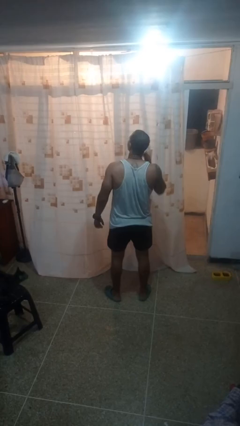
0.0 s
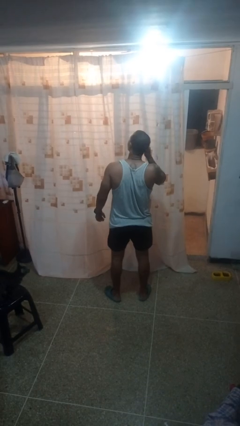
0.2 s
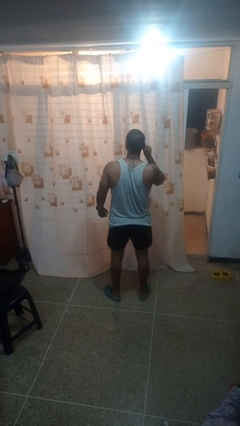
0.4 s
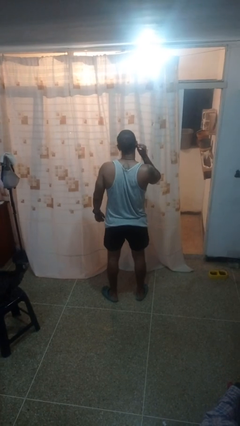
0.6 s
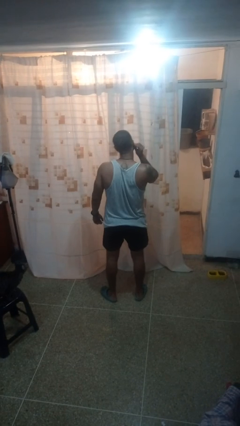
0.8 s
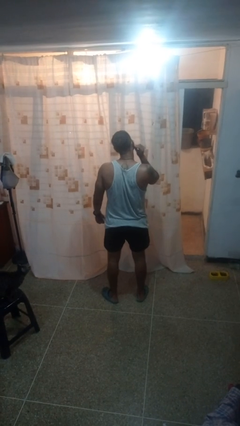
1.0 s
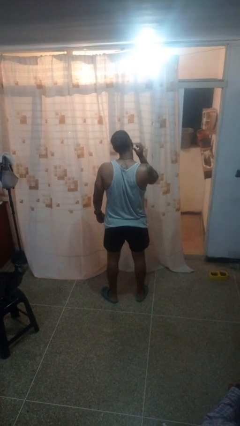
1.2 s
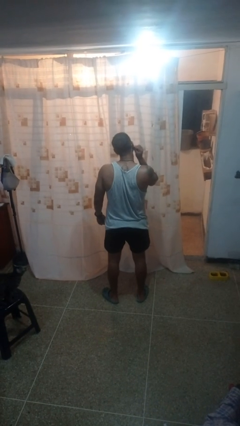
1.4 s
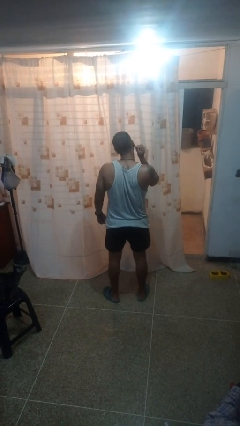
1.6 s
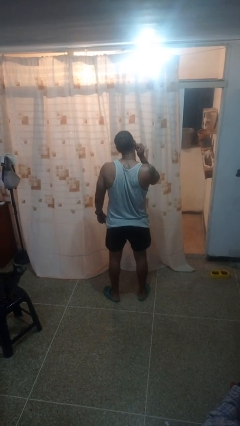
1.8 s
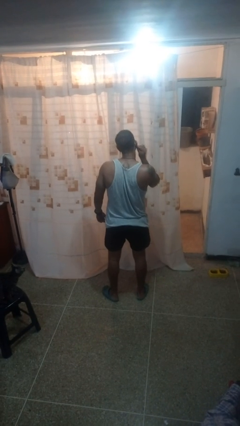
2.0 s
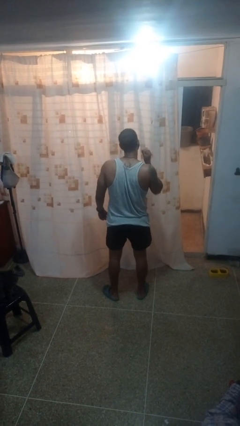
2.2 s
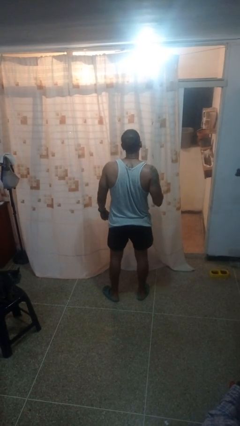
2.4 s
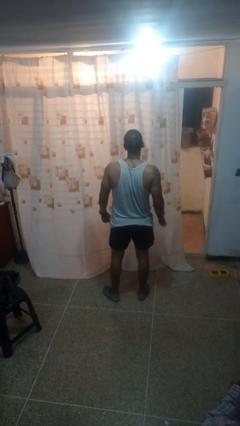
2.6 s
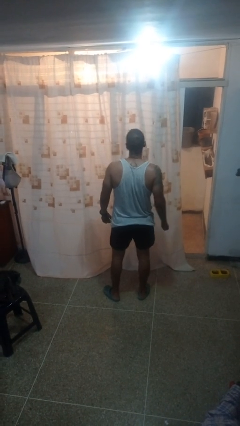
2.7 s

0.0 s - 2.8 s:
person touches earlobe

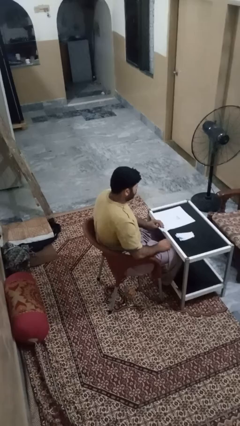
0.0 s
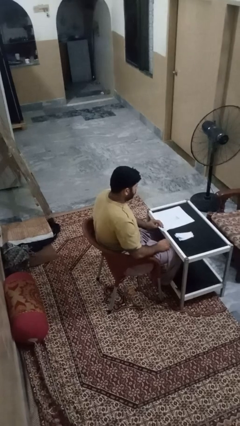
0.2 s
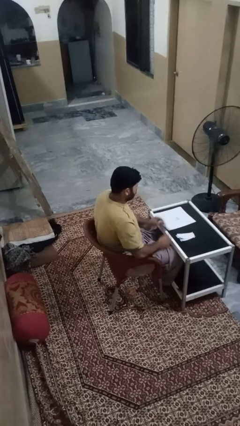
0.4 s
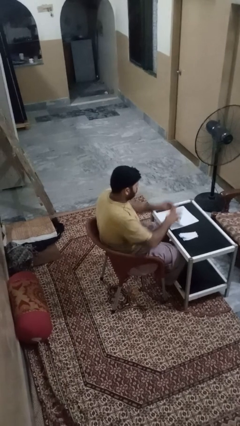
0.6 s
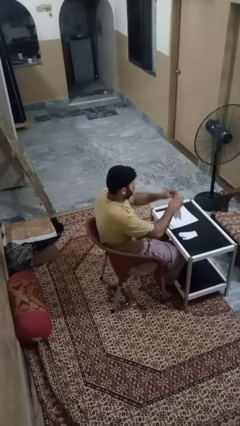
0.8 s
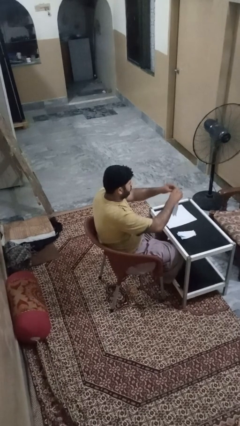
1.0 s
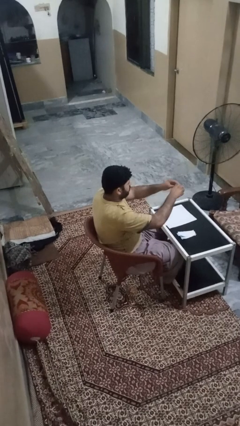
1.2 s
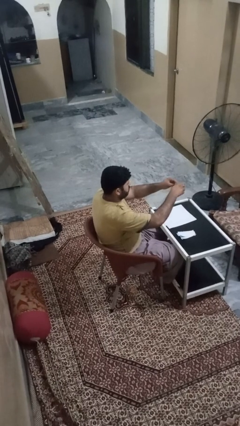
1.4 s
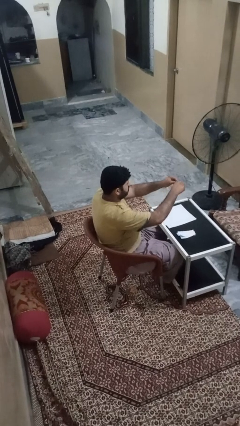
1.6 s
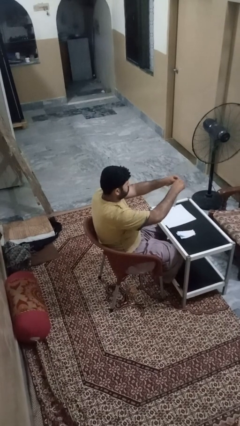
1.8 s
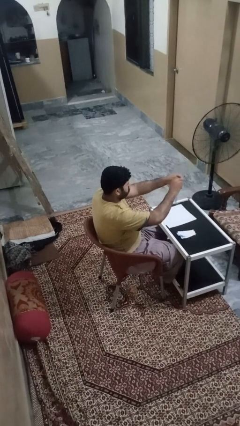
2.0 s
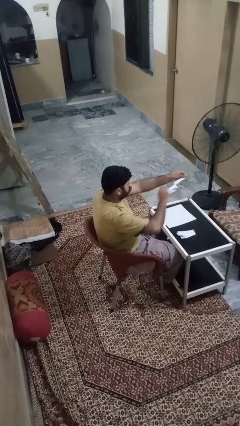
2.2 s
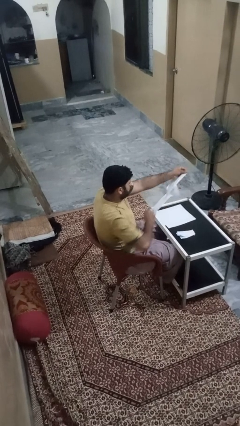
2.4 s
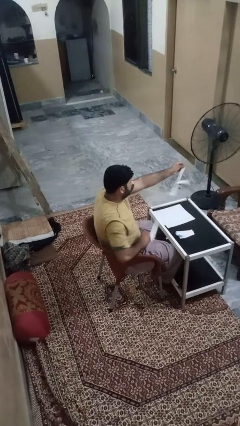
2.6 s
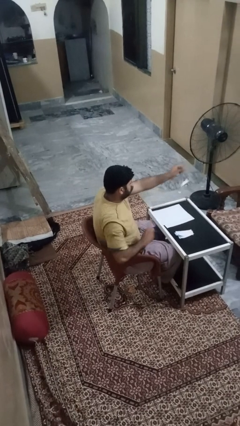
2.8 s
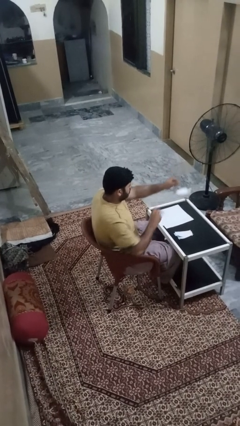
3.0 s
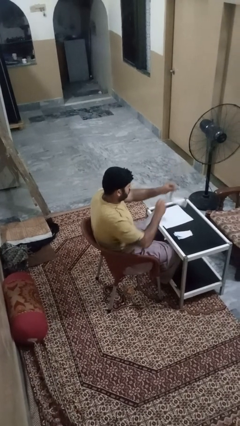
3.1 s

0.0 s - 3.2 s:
person tears paper

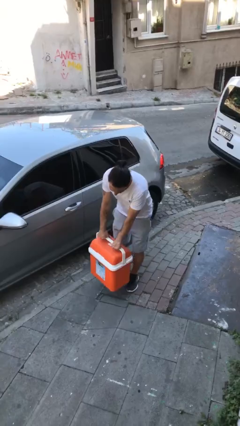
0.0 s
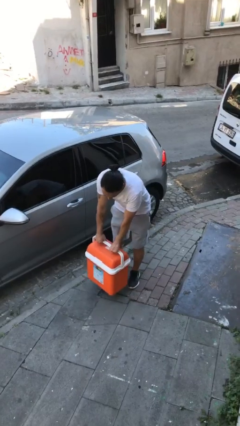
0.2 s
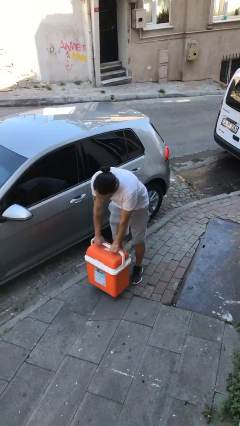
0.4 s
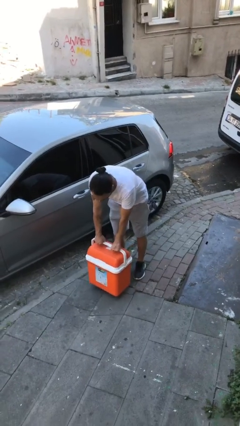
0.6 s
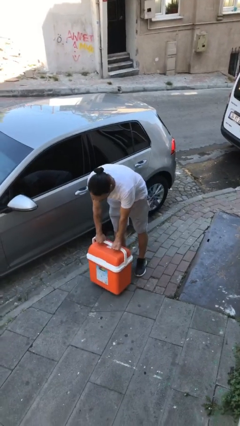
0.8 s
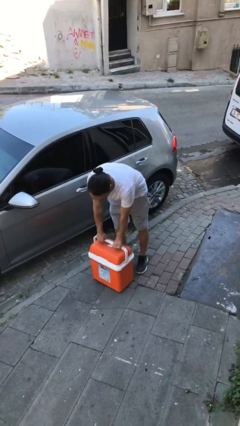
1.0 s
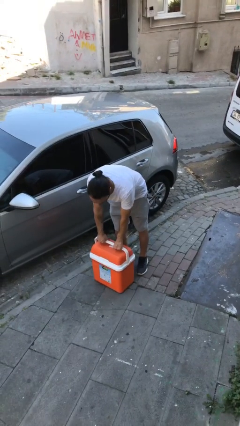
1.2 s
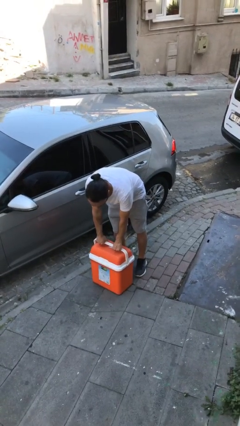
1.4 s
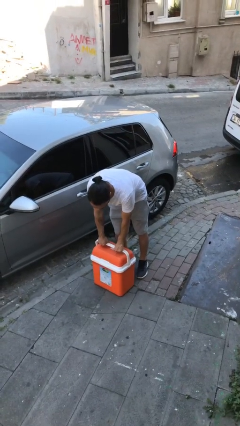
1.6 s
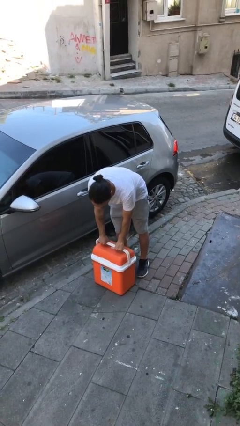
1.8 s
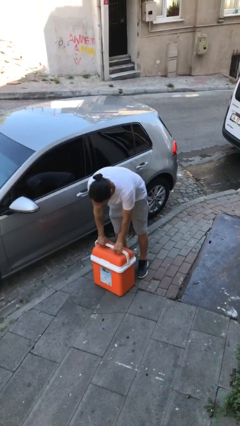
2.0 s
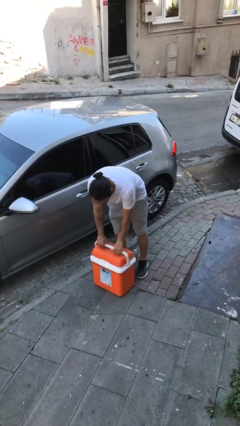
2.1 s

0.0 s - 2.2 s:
person puts down object on floor

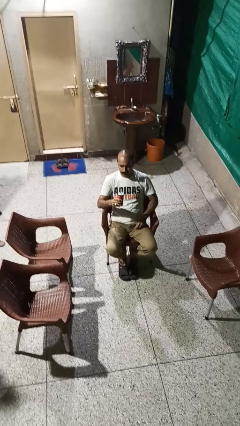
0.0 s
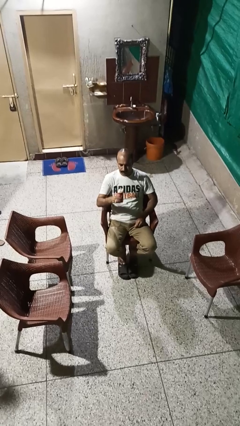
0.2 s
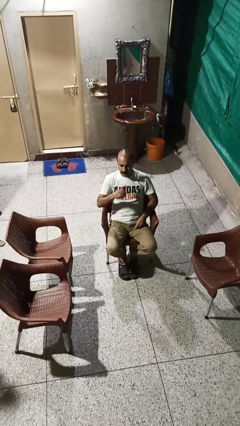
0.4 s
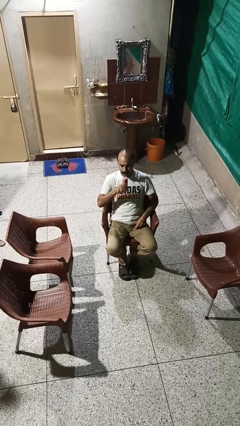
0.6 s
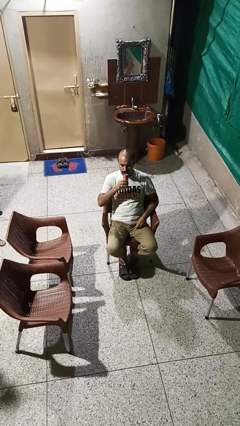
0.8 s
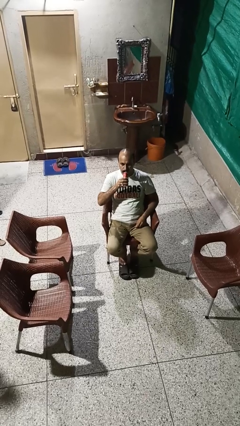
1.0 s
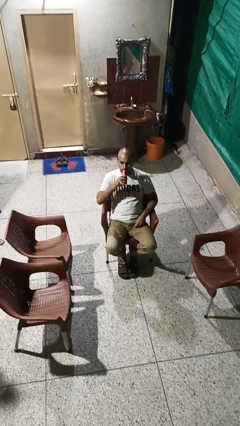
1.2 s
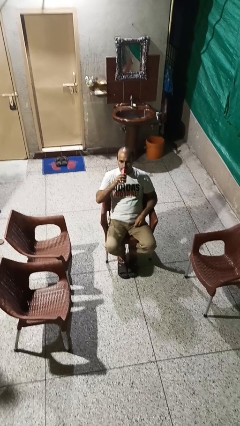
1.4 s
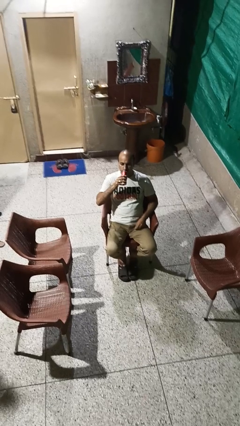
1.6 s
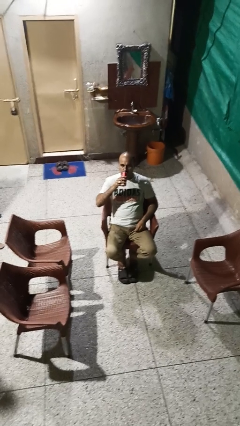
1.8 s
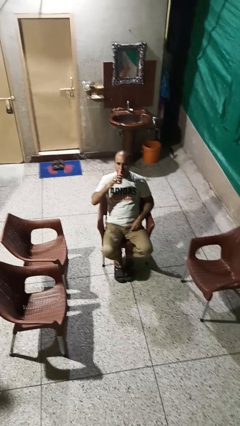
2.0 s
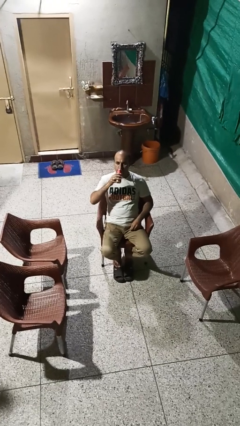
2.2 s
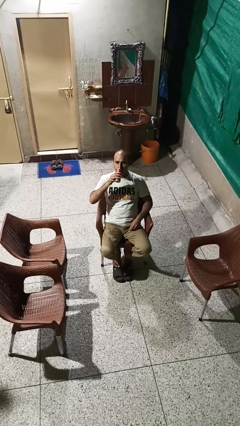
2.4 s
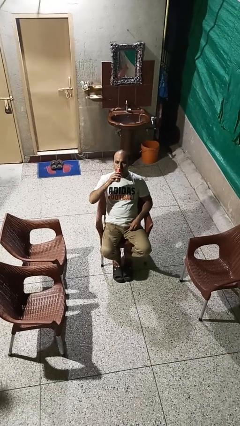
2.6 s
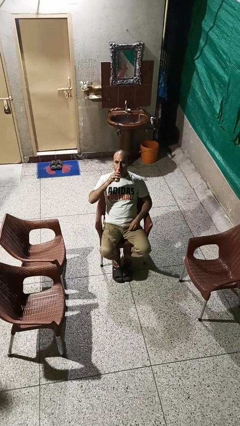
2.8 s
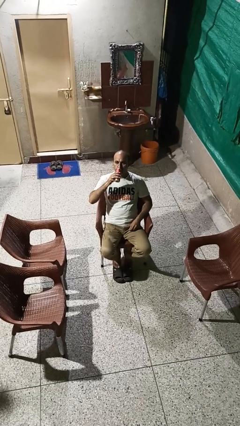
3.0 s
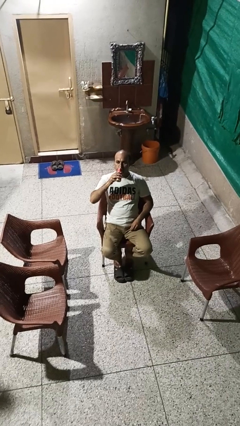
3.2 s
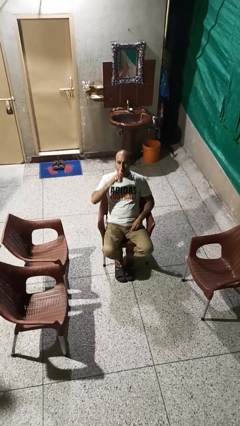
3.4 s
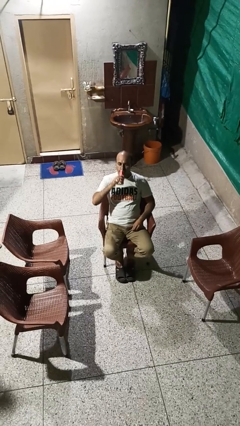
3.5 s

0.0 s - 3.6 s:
person drinks from beverage can

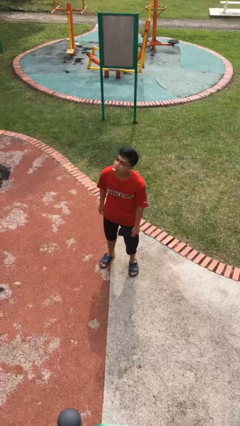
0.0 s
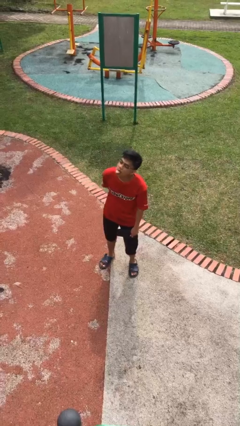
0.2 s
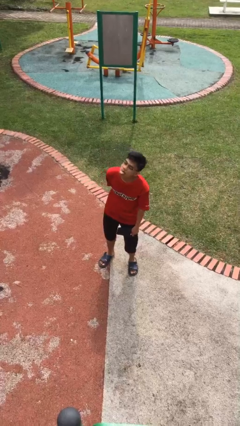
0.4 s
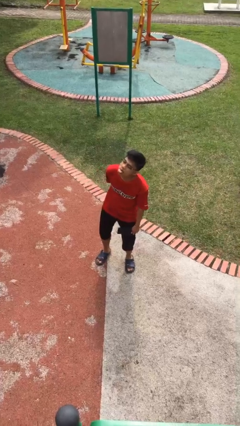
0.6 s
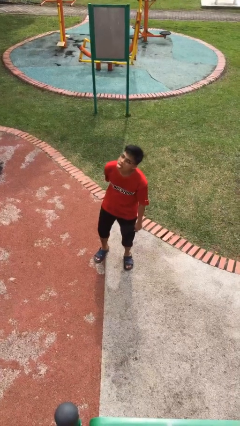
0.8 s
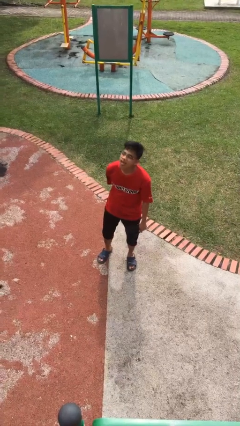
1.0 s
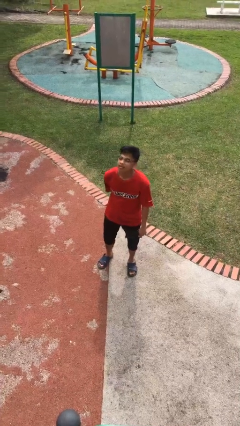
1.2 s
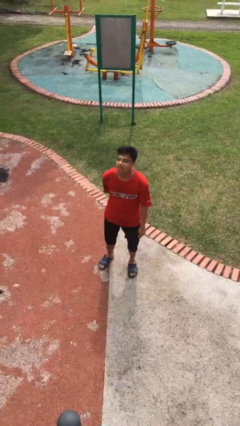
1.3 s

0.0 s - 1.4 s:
person sticks out tongue

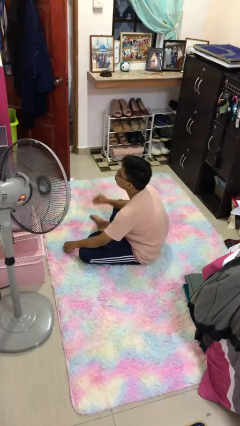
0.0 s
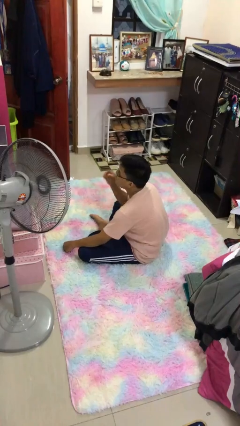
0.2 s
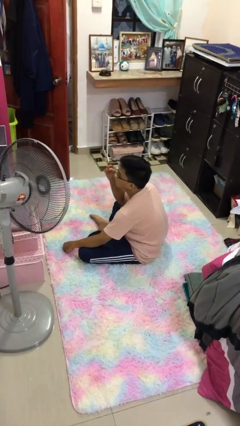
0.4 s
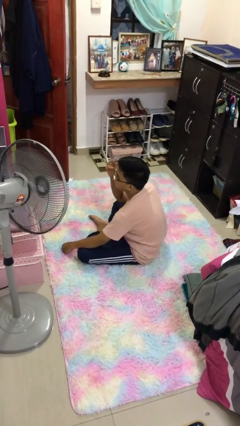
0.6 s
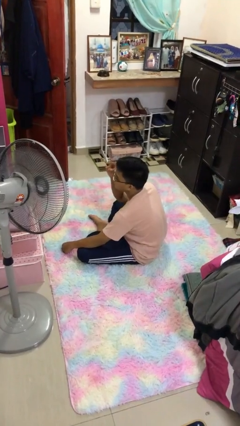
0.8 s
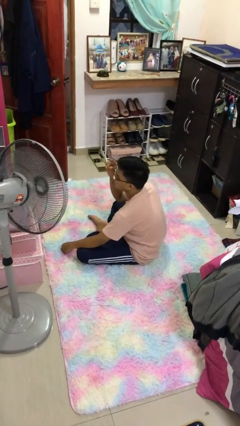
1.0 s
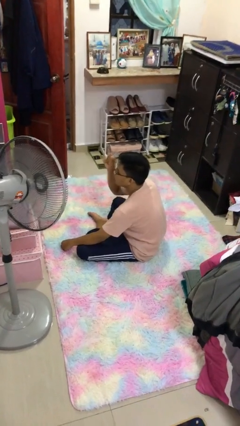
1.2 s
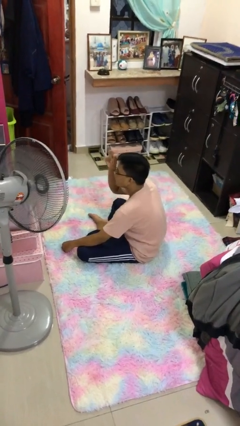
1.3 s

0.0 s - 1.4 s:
person snaps fingers

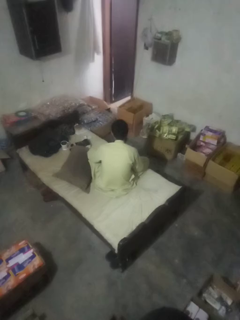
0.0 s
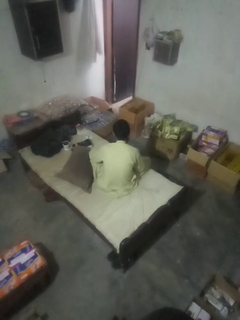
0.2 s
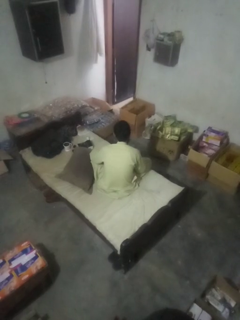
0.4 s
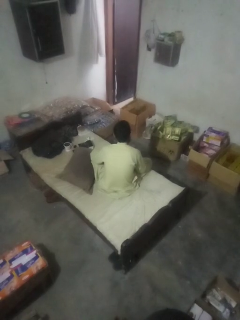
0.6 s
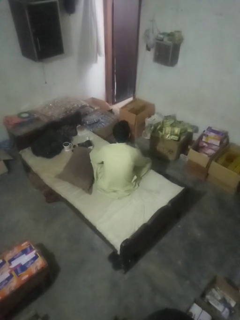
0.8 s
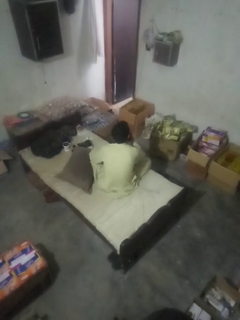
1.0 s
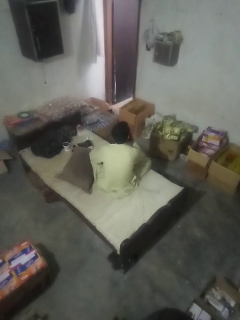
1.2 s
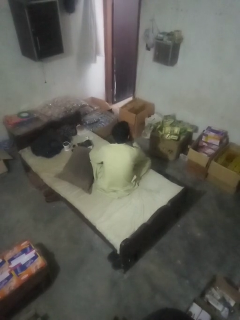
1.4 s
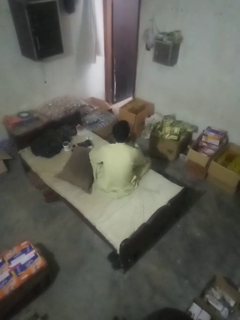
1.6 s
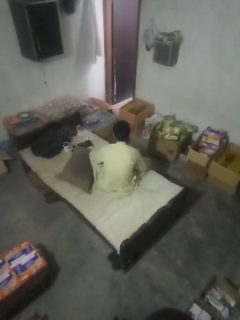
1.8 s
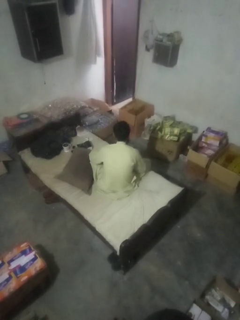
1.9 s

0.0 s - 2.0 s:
person gestures be quiet

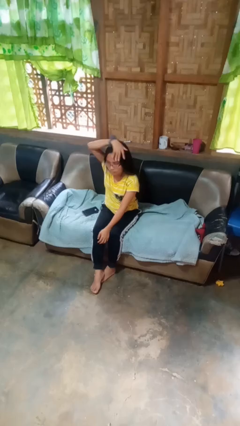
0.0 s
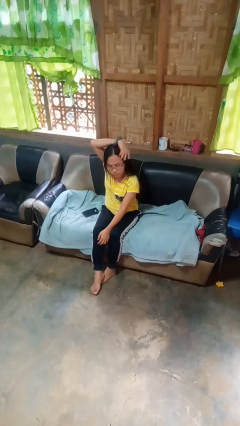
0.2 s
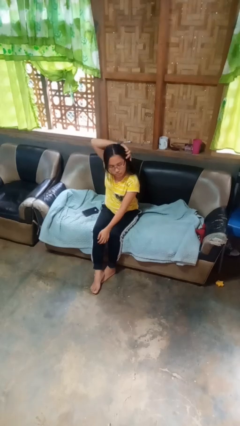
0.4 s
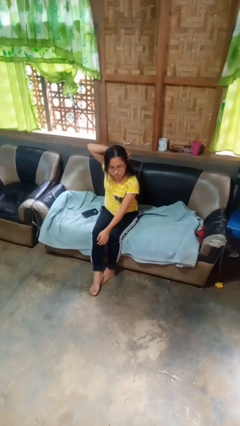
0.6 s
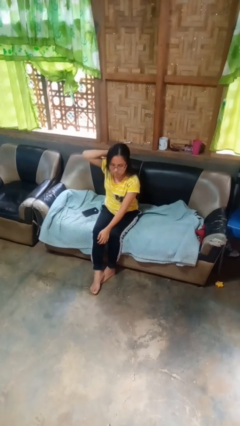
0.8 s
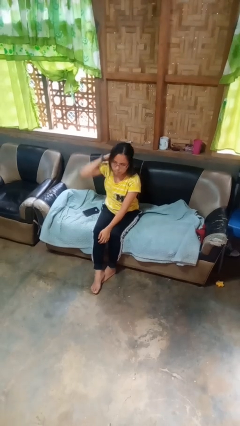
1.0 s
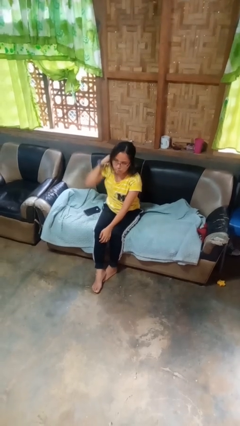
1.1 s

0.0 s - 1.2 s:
person strokes hair
